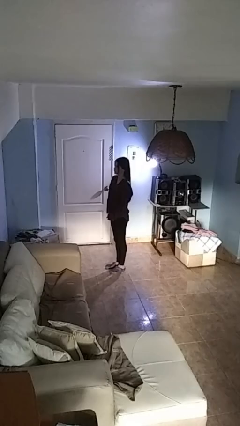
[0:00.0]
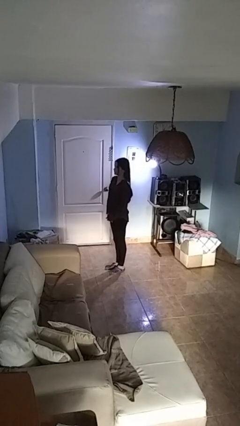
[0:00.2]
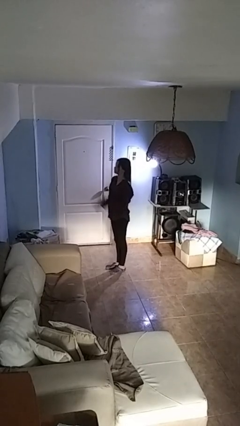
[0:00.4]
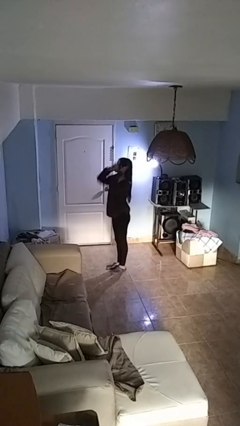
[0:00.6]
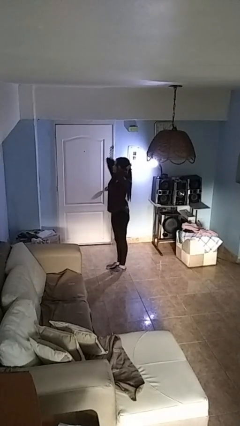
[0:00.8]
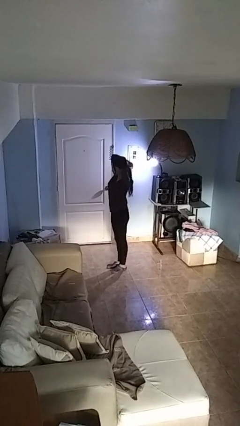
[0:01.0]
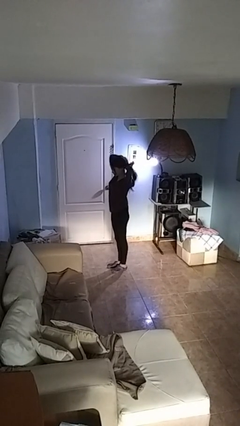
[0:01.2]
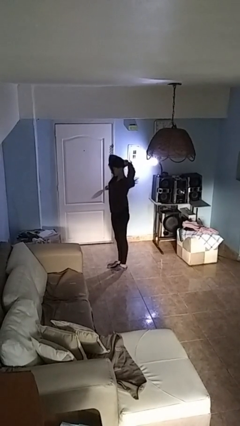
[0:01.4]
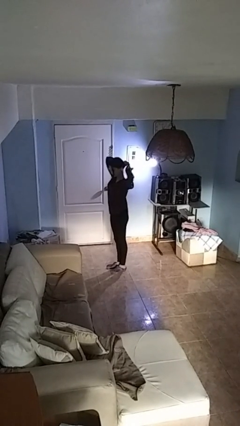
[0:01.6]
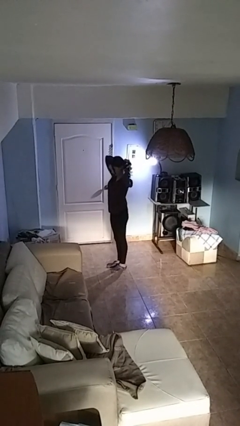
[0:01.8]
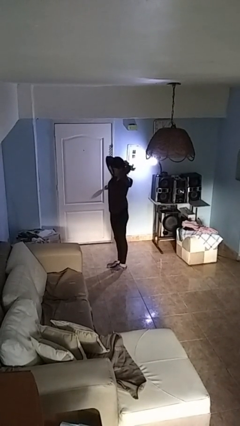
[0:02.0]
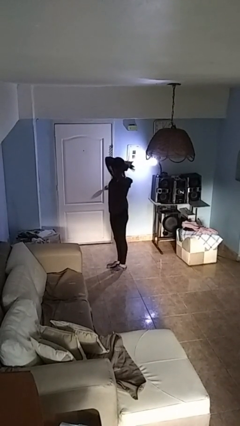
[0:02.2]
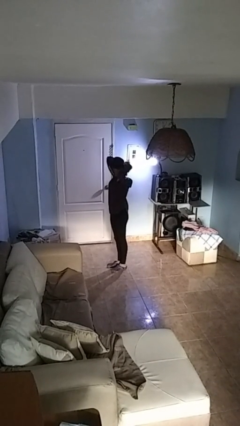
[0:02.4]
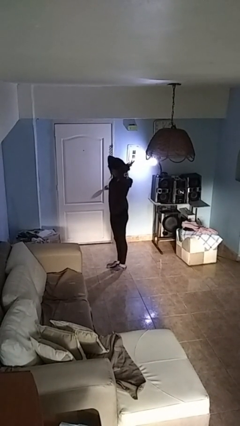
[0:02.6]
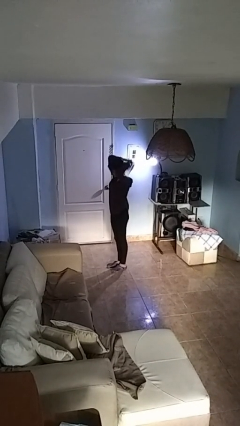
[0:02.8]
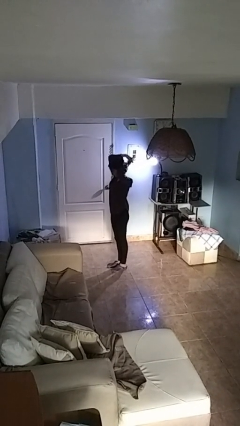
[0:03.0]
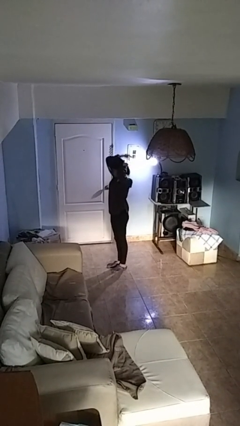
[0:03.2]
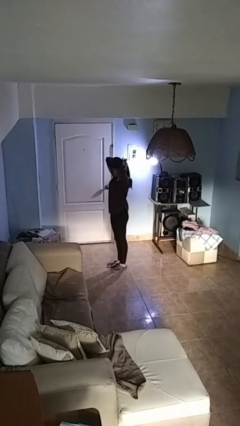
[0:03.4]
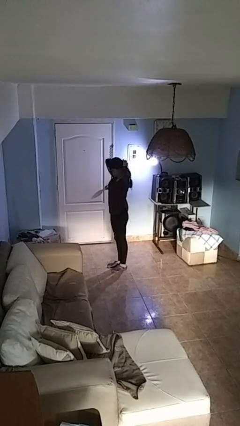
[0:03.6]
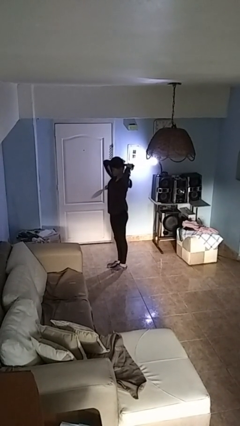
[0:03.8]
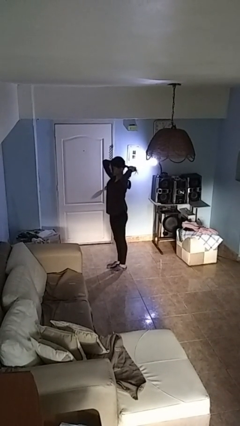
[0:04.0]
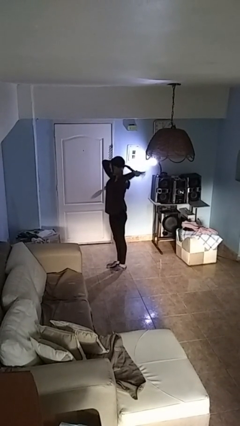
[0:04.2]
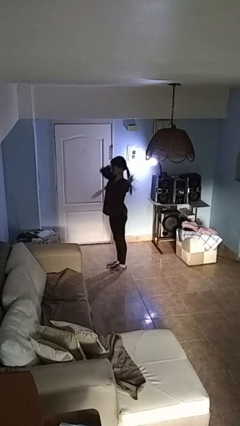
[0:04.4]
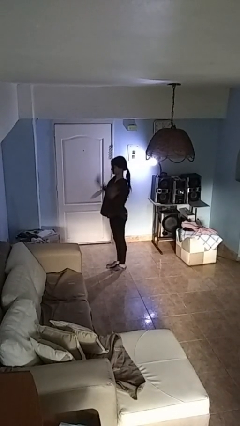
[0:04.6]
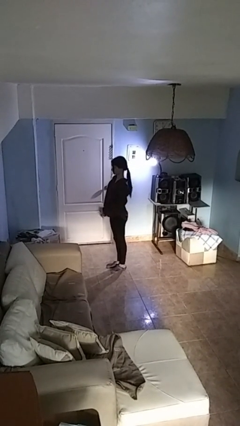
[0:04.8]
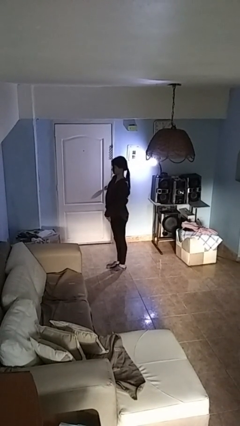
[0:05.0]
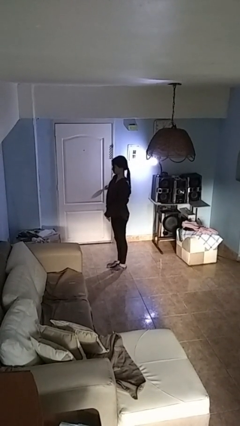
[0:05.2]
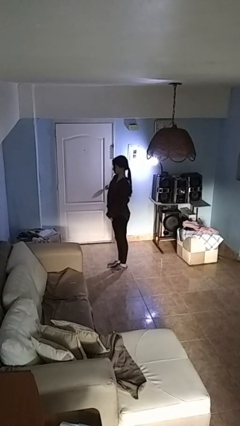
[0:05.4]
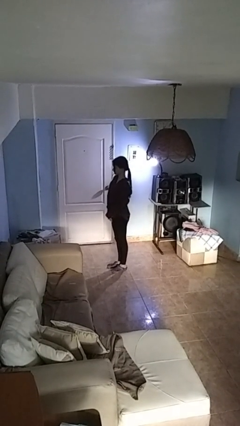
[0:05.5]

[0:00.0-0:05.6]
person puts hair in ponytail

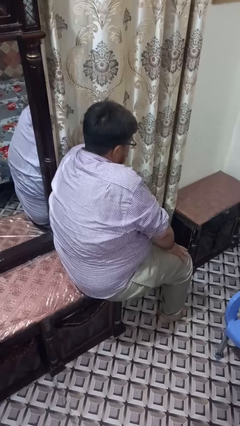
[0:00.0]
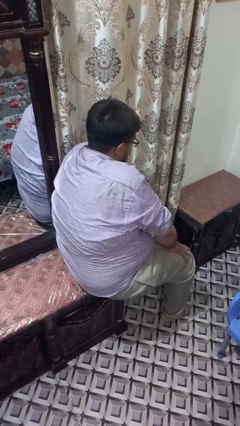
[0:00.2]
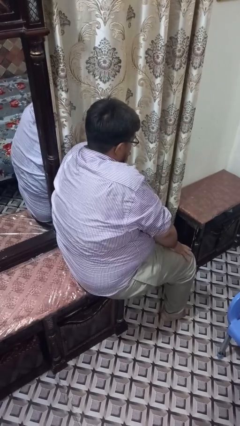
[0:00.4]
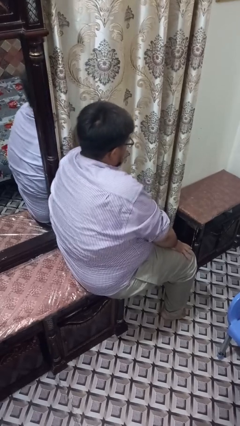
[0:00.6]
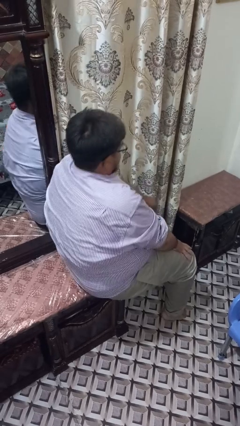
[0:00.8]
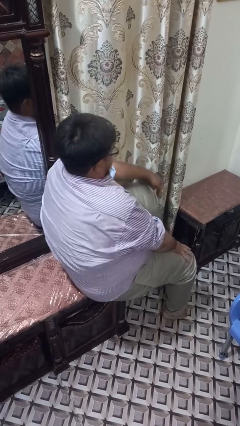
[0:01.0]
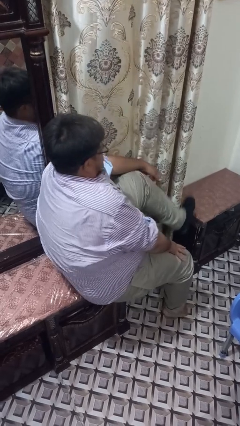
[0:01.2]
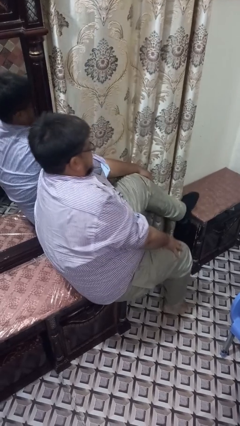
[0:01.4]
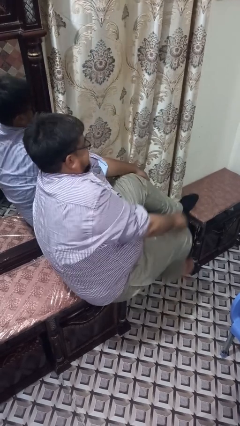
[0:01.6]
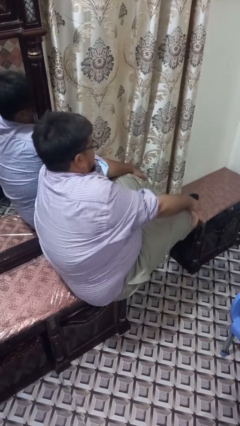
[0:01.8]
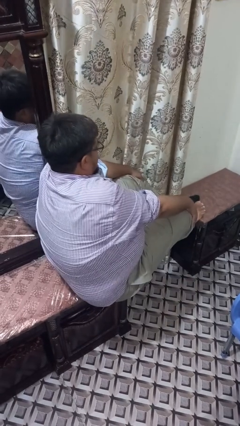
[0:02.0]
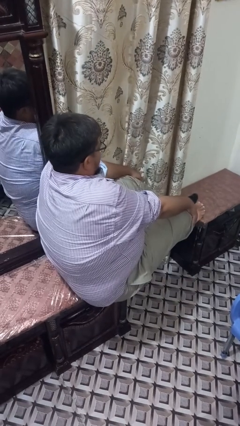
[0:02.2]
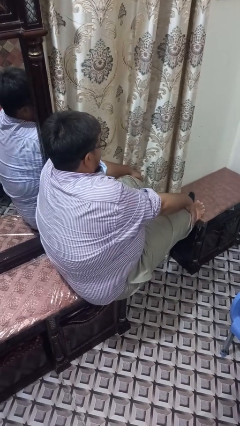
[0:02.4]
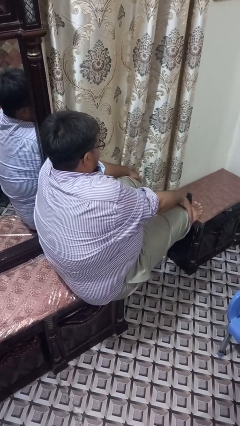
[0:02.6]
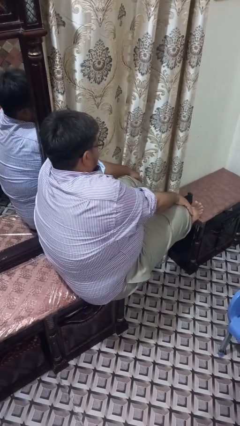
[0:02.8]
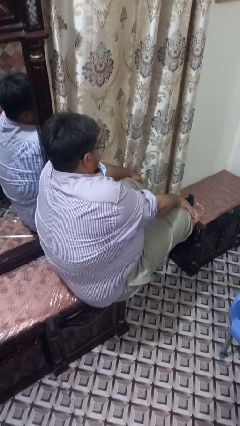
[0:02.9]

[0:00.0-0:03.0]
person puts feet up

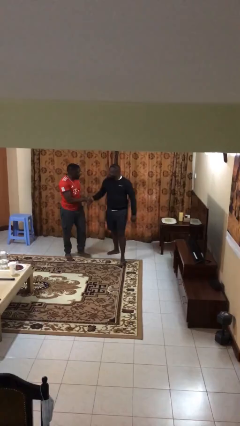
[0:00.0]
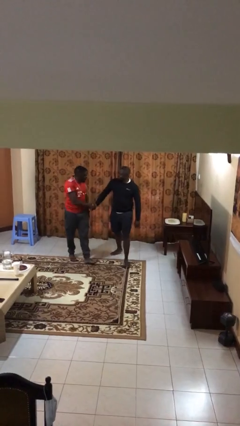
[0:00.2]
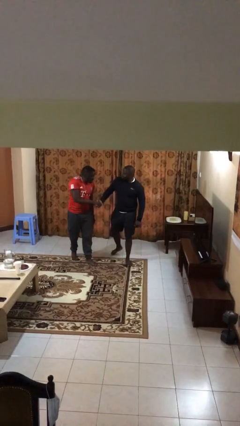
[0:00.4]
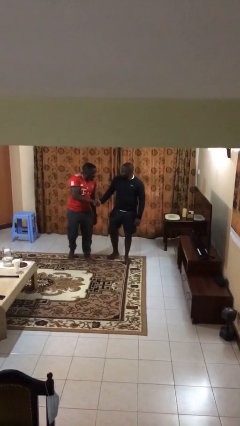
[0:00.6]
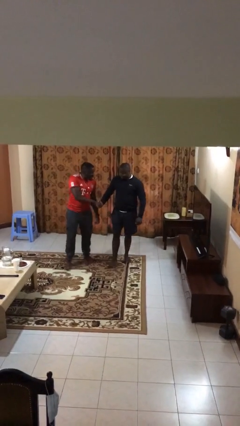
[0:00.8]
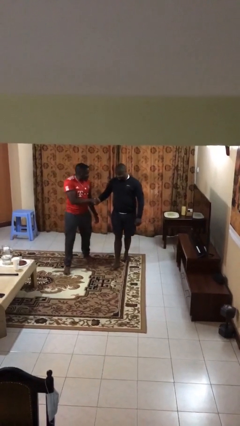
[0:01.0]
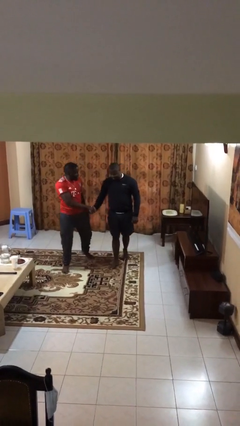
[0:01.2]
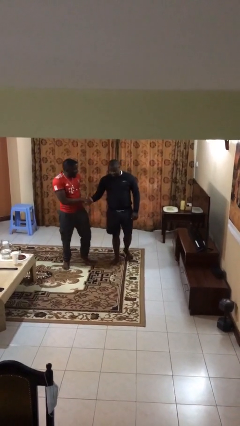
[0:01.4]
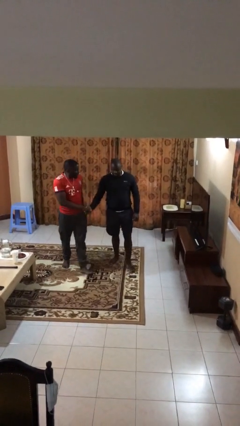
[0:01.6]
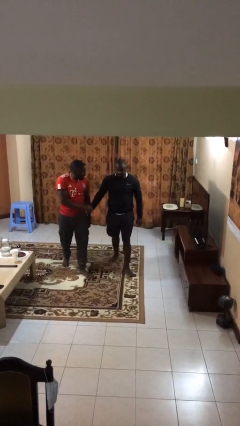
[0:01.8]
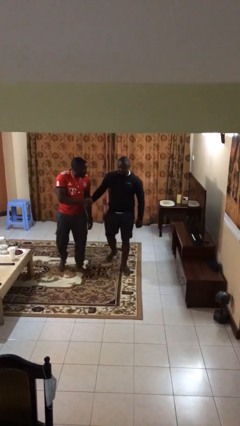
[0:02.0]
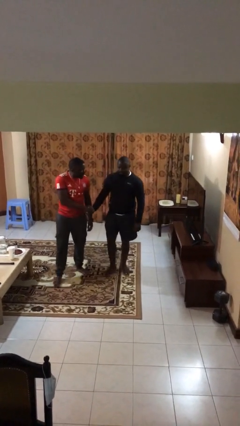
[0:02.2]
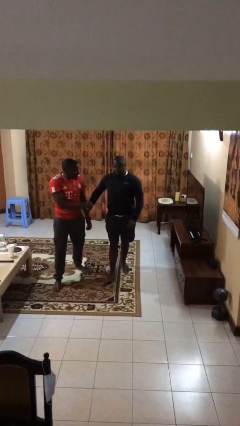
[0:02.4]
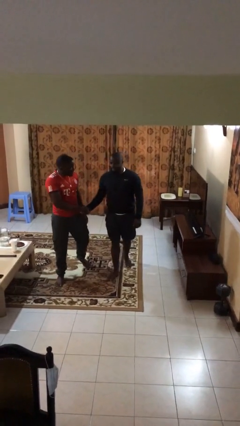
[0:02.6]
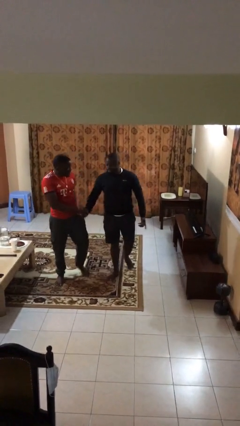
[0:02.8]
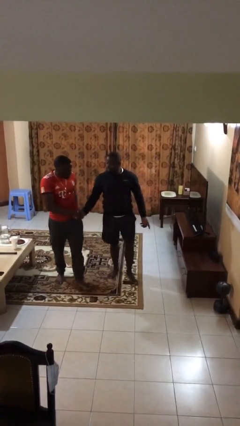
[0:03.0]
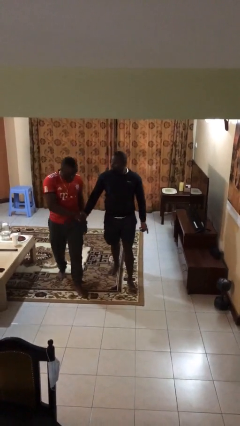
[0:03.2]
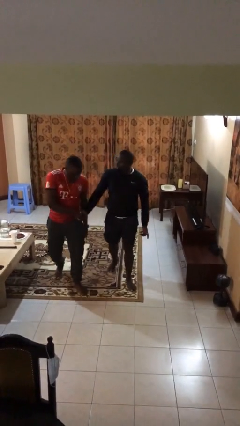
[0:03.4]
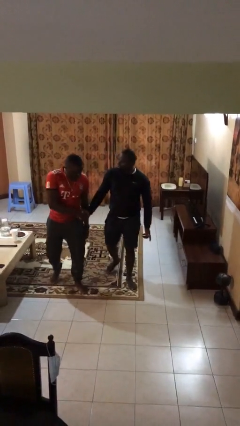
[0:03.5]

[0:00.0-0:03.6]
person holds hand

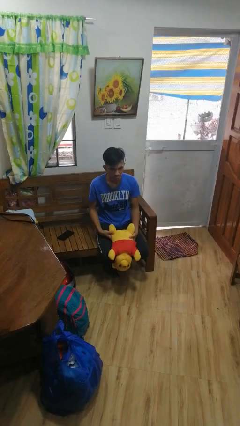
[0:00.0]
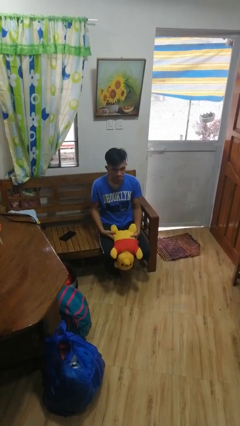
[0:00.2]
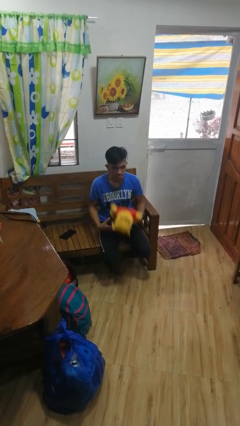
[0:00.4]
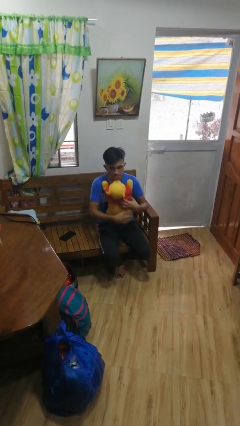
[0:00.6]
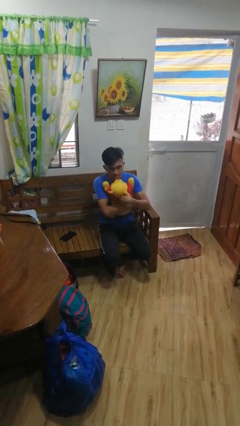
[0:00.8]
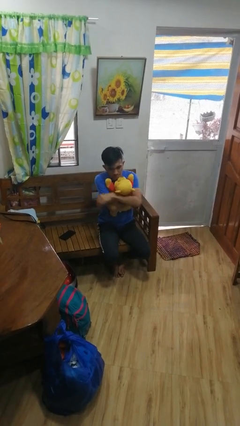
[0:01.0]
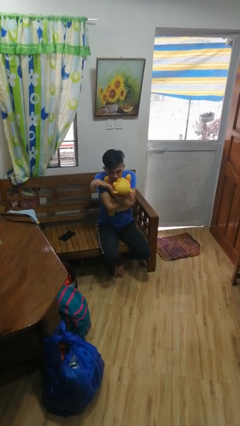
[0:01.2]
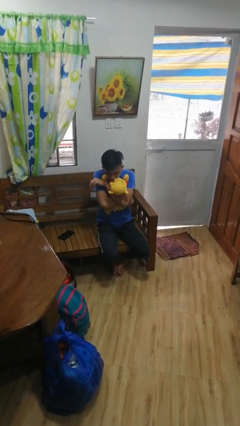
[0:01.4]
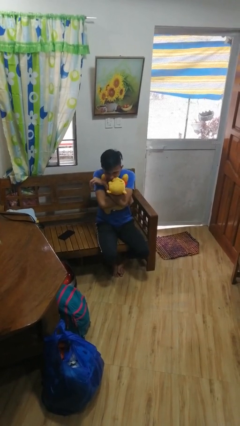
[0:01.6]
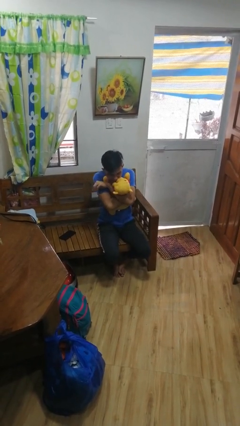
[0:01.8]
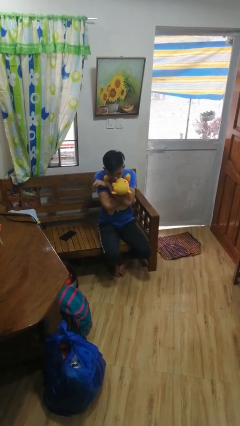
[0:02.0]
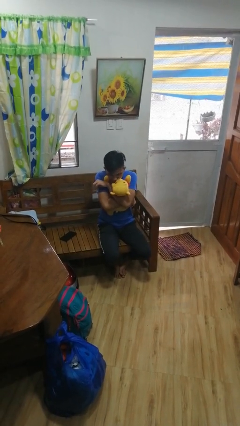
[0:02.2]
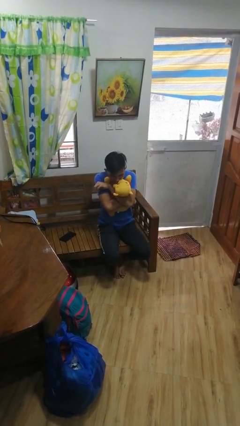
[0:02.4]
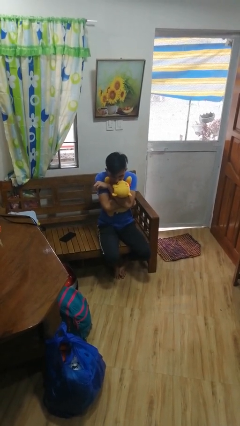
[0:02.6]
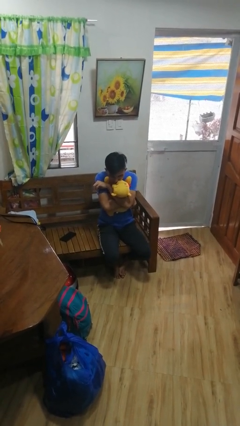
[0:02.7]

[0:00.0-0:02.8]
person hugs stuffed animal

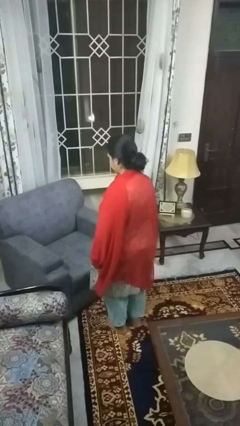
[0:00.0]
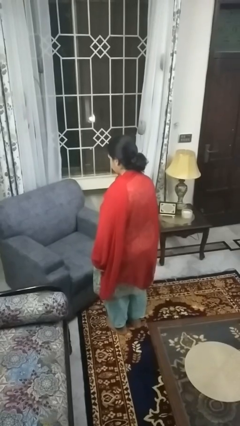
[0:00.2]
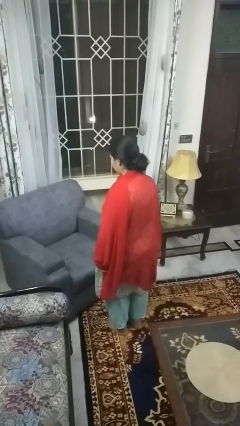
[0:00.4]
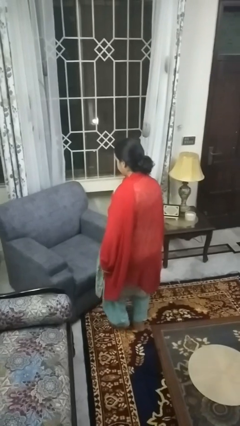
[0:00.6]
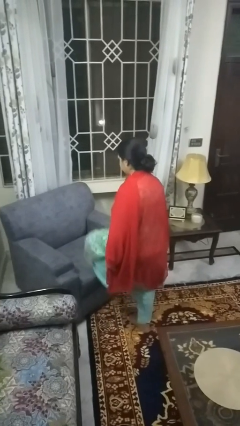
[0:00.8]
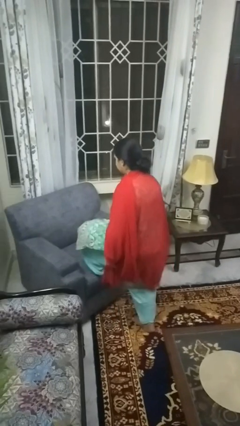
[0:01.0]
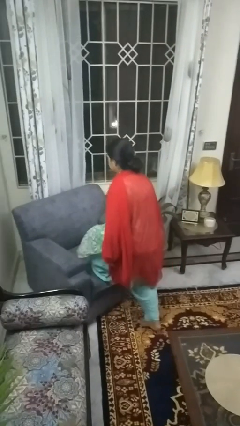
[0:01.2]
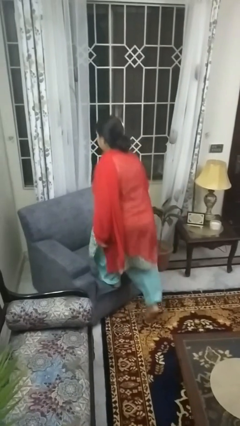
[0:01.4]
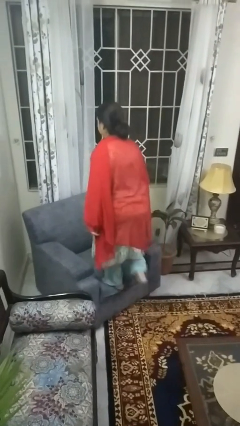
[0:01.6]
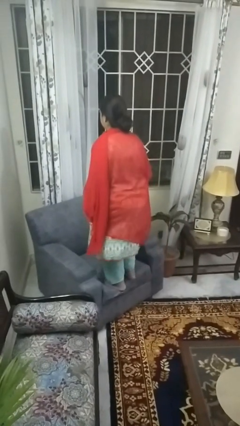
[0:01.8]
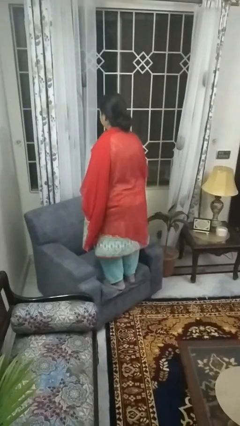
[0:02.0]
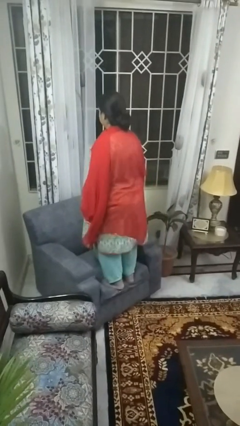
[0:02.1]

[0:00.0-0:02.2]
person climbs on couch

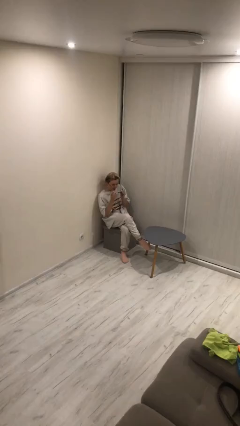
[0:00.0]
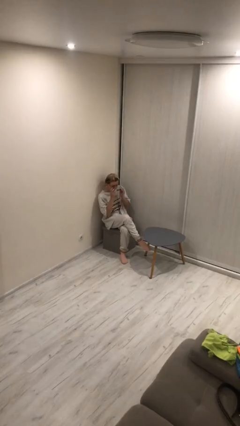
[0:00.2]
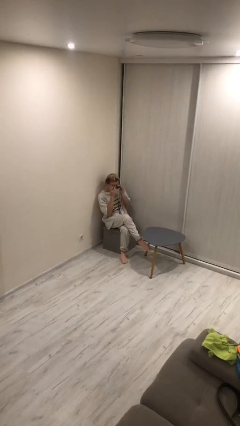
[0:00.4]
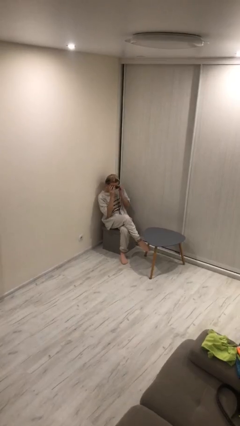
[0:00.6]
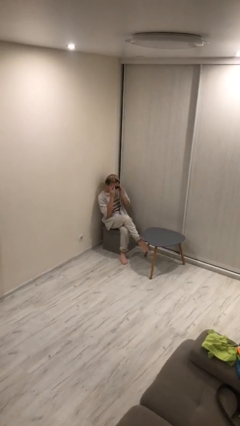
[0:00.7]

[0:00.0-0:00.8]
person puts on sunglasses
